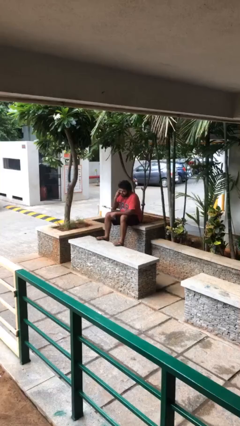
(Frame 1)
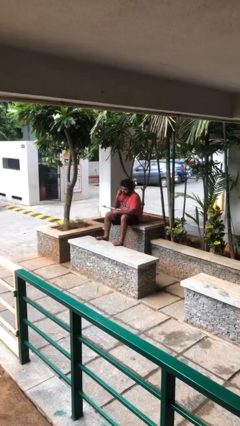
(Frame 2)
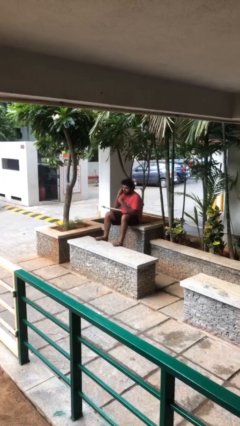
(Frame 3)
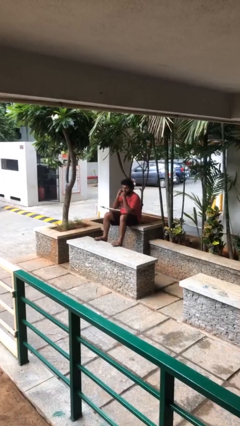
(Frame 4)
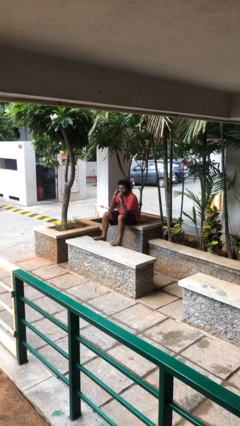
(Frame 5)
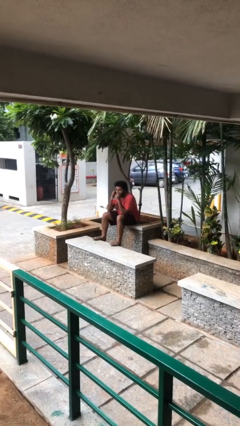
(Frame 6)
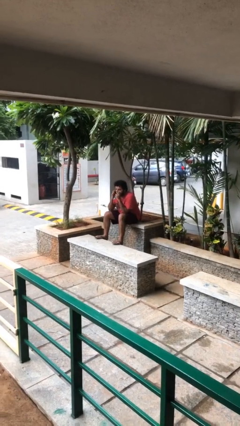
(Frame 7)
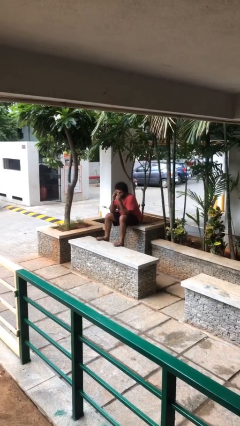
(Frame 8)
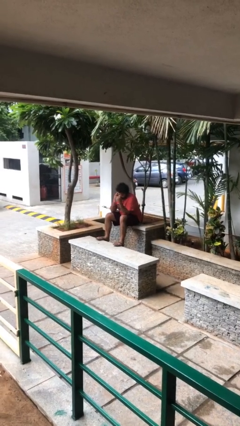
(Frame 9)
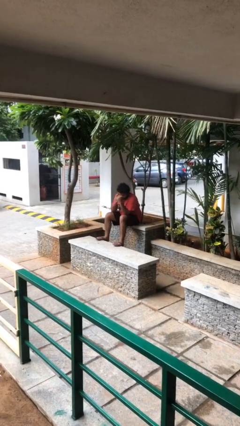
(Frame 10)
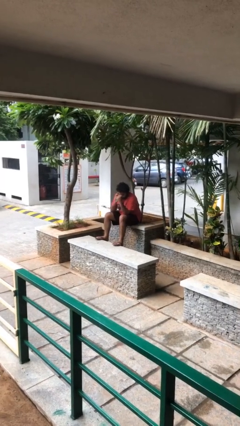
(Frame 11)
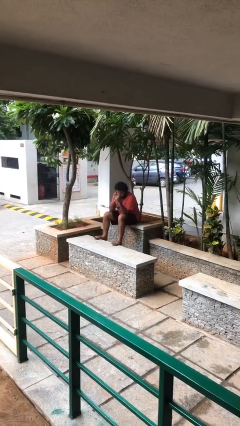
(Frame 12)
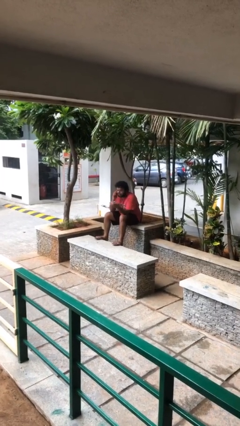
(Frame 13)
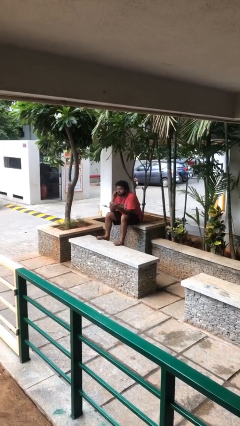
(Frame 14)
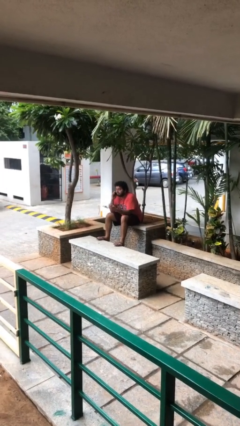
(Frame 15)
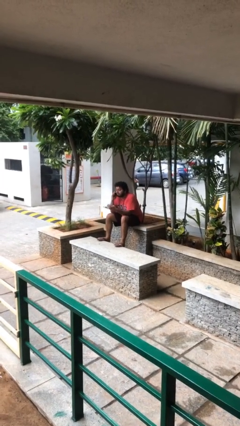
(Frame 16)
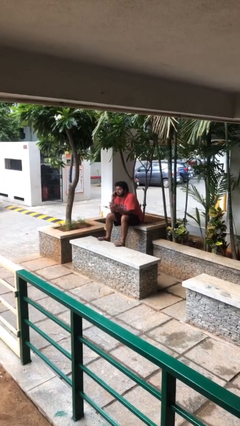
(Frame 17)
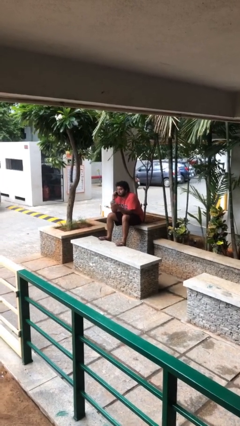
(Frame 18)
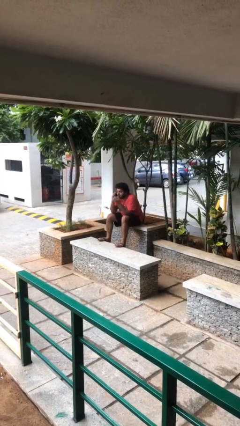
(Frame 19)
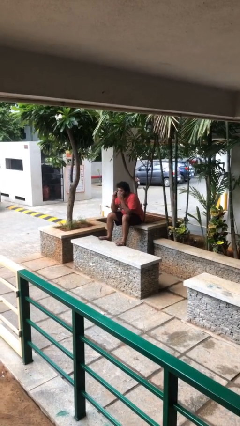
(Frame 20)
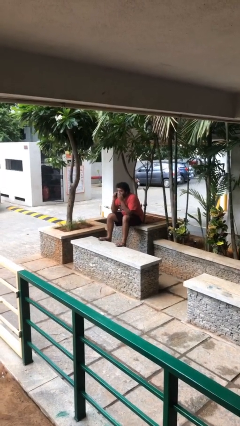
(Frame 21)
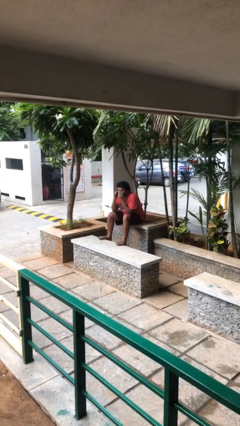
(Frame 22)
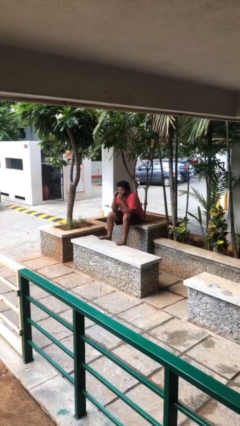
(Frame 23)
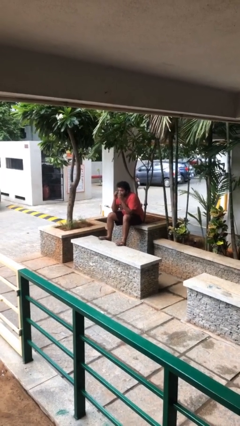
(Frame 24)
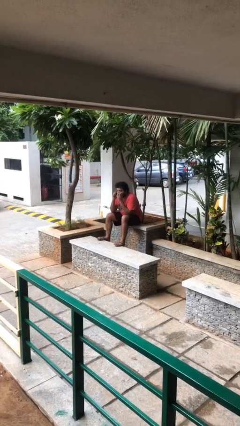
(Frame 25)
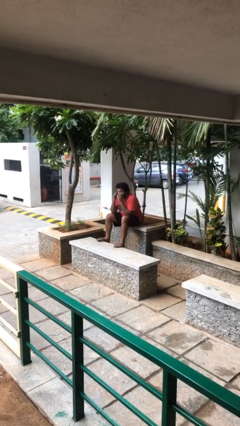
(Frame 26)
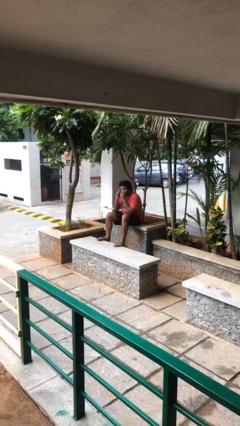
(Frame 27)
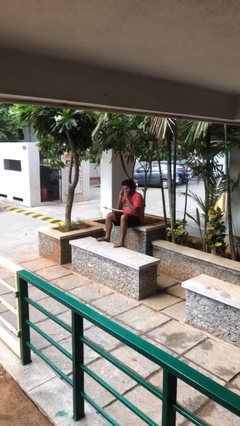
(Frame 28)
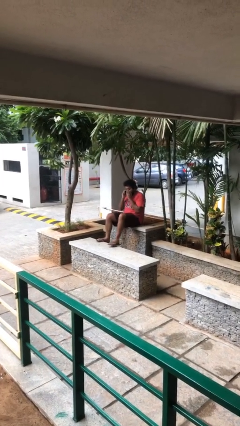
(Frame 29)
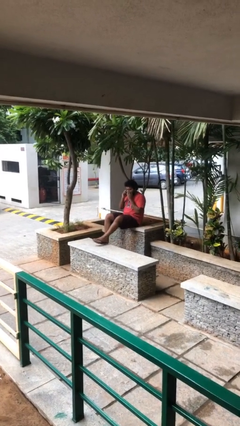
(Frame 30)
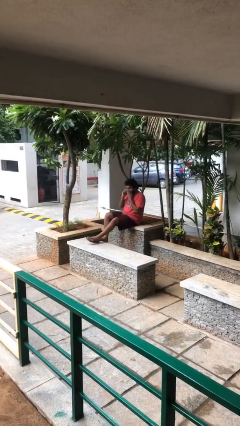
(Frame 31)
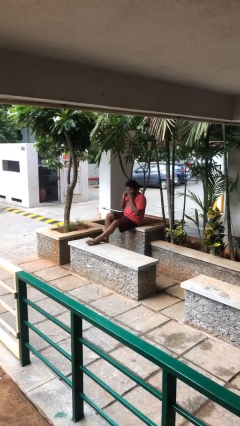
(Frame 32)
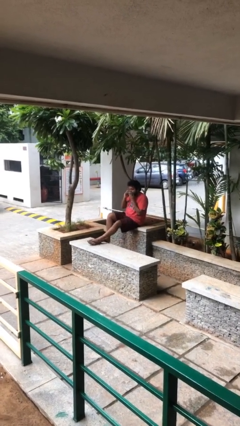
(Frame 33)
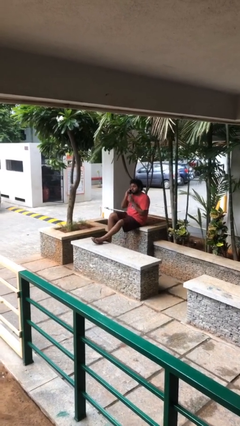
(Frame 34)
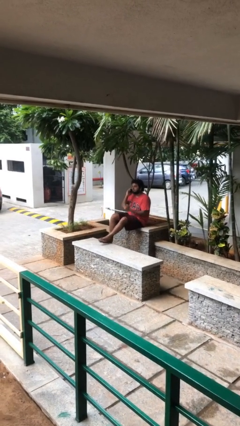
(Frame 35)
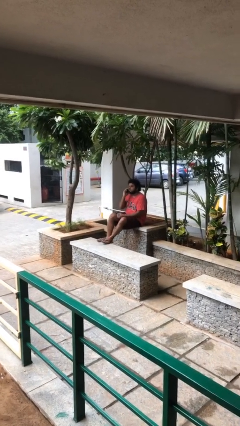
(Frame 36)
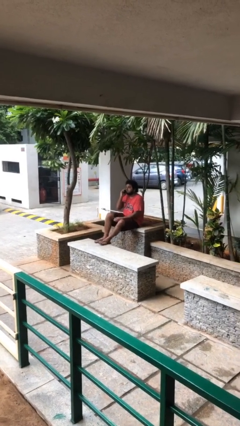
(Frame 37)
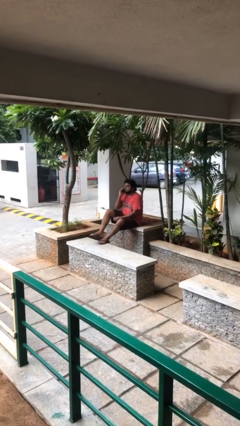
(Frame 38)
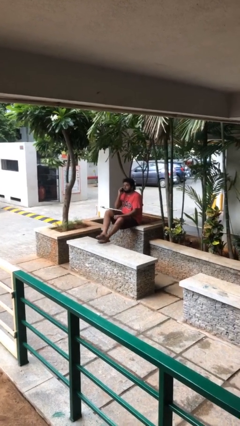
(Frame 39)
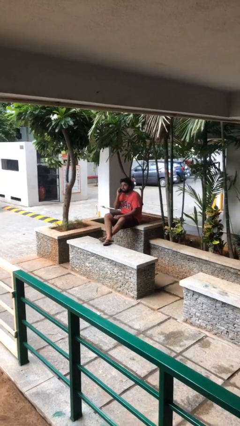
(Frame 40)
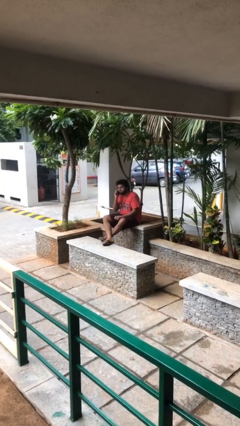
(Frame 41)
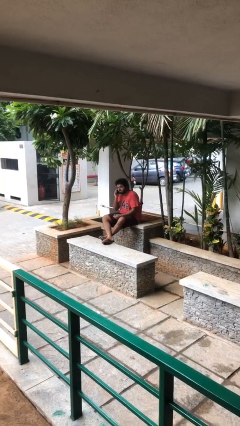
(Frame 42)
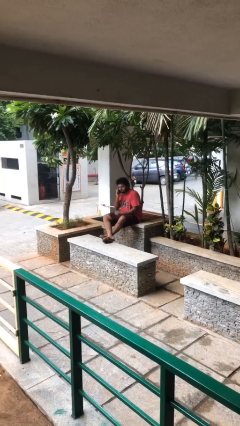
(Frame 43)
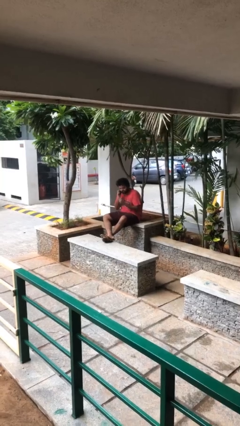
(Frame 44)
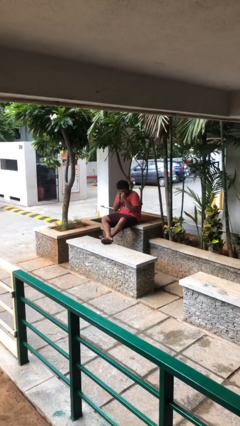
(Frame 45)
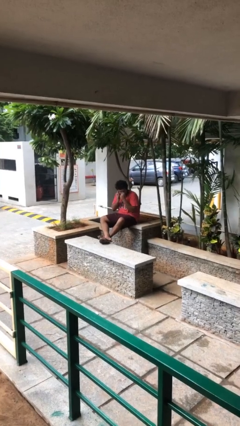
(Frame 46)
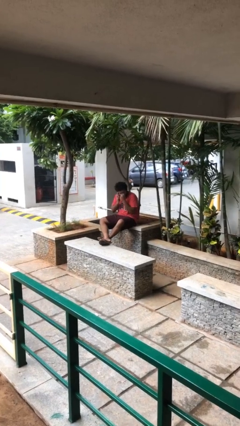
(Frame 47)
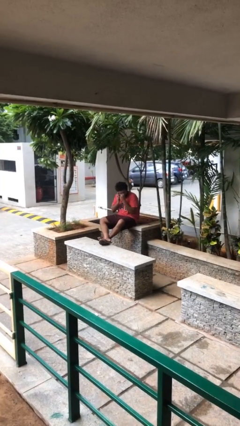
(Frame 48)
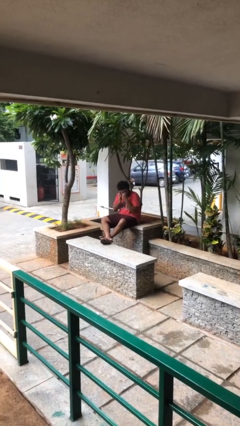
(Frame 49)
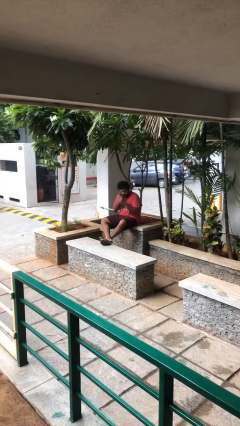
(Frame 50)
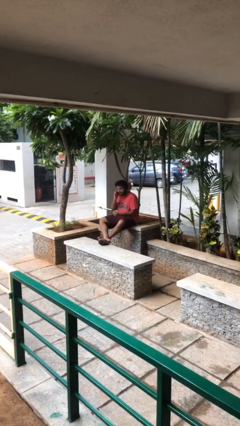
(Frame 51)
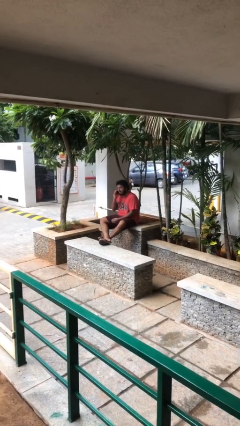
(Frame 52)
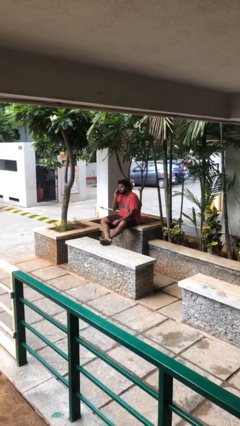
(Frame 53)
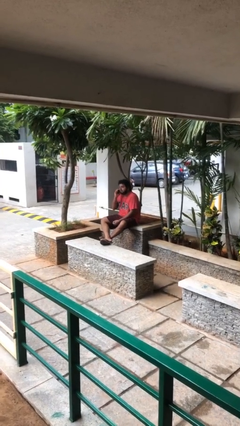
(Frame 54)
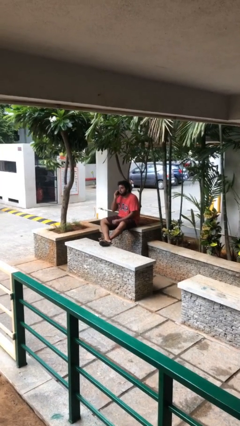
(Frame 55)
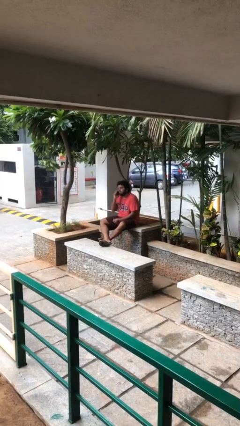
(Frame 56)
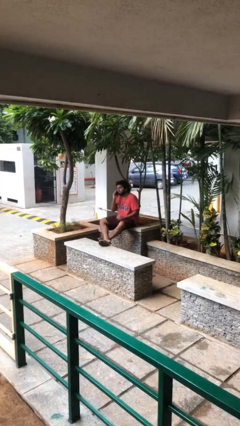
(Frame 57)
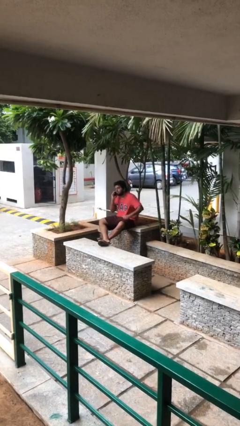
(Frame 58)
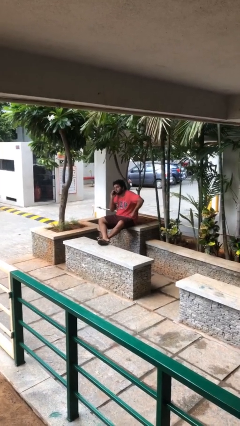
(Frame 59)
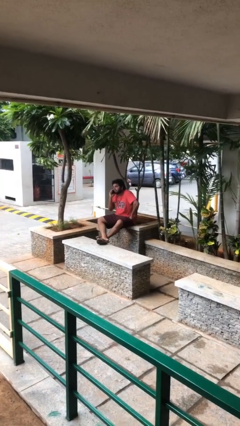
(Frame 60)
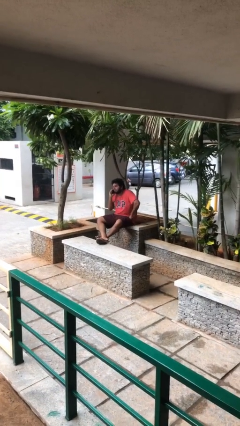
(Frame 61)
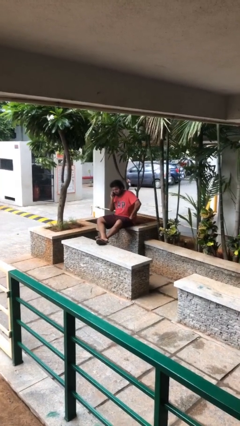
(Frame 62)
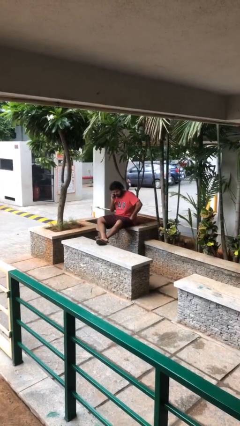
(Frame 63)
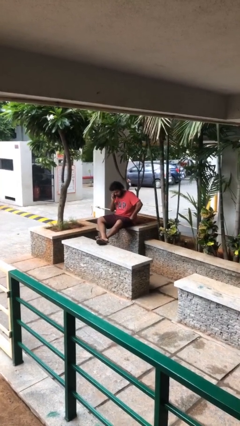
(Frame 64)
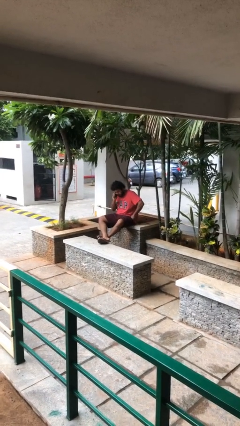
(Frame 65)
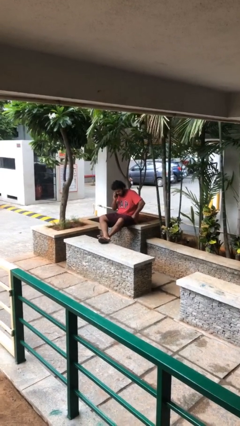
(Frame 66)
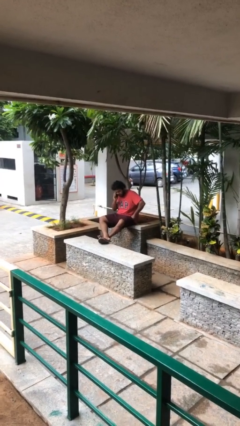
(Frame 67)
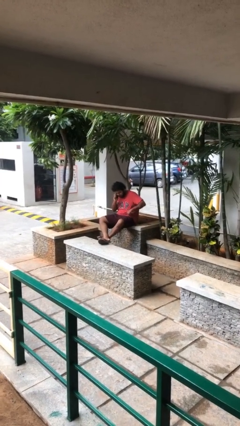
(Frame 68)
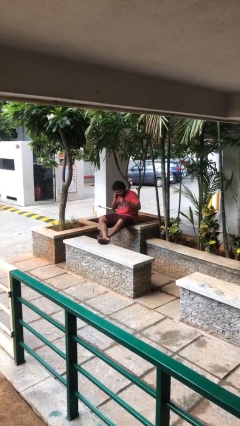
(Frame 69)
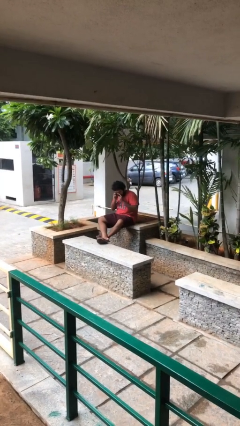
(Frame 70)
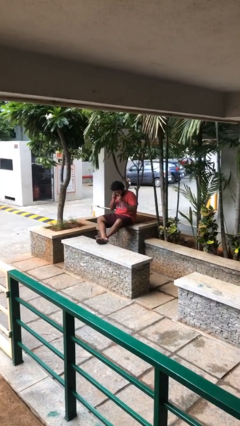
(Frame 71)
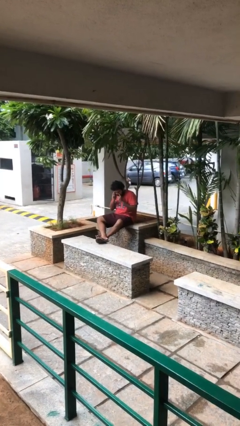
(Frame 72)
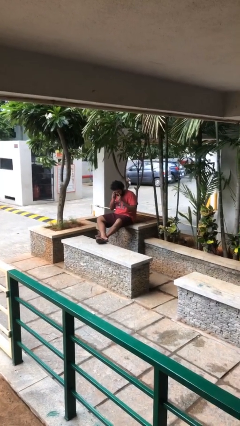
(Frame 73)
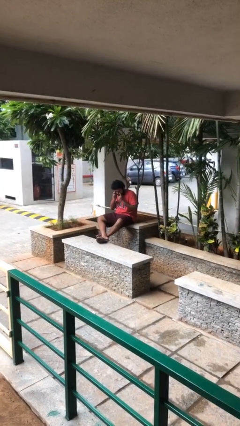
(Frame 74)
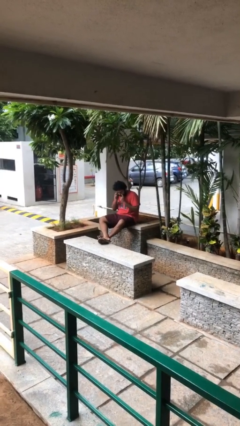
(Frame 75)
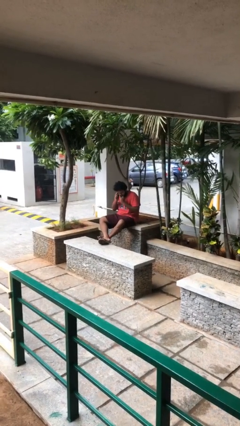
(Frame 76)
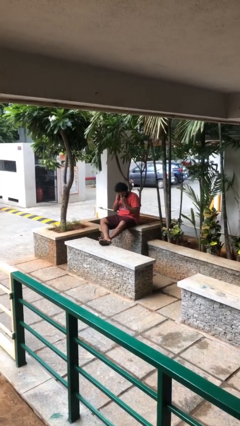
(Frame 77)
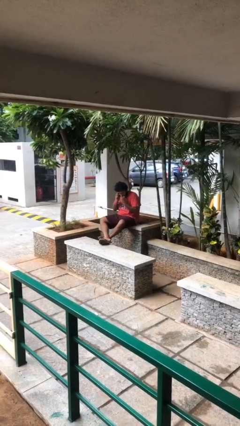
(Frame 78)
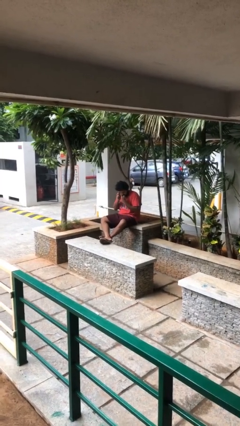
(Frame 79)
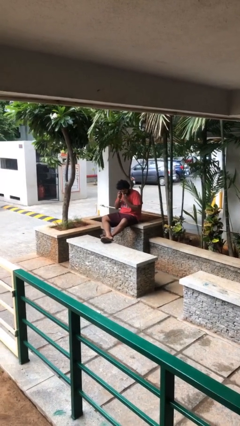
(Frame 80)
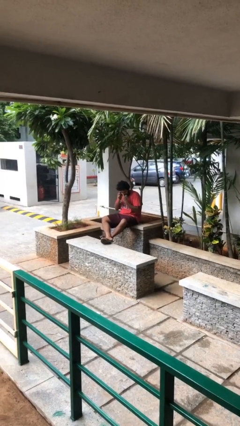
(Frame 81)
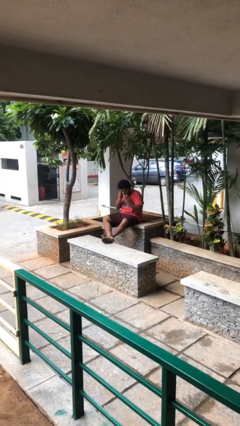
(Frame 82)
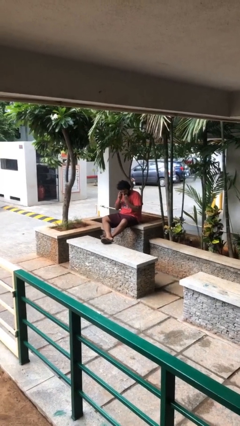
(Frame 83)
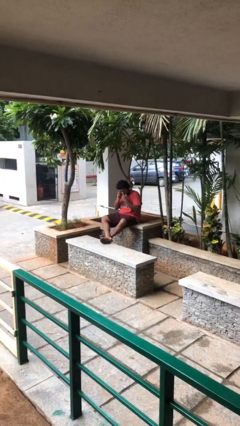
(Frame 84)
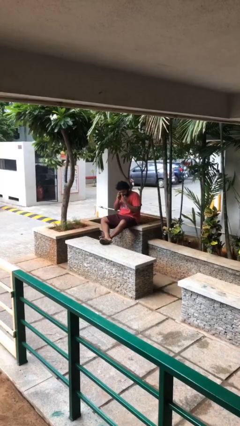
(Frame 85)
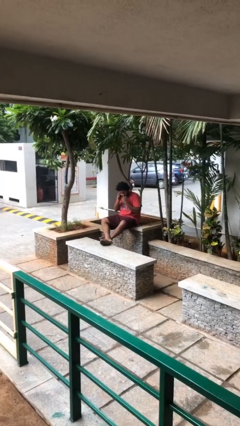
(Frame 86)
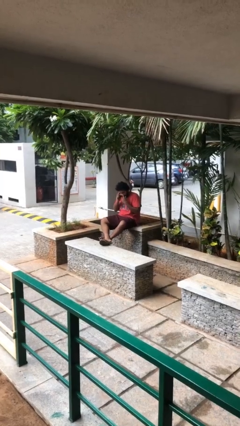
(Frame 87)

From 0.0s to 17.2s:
person talks on phone

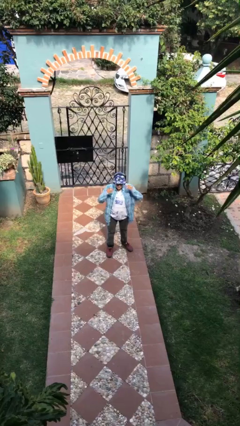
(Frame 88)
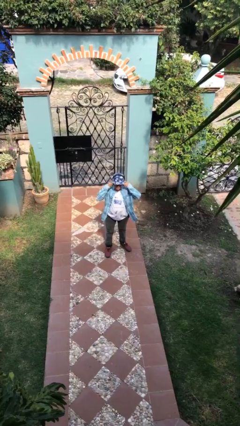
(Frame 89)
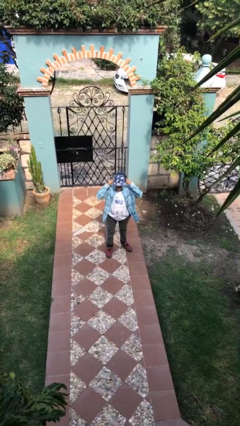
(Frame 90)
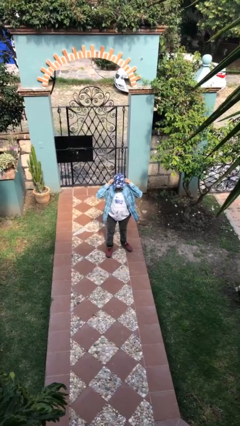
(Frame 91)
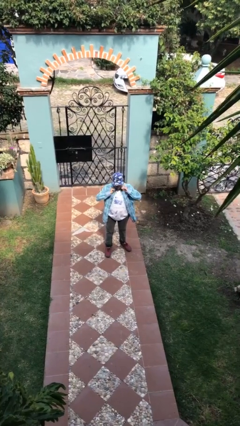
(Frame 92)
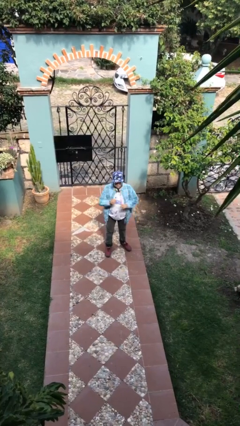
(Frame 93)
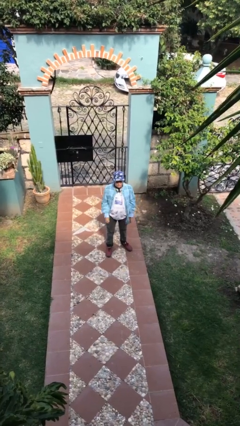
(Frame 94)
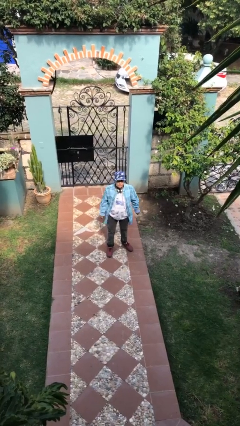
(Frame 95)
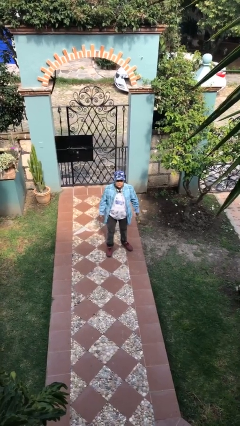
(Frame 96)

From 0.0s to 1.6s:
person takes off headphones
